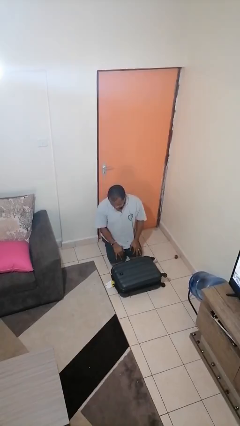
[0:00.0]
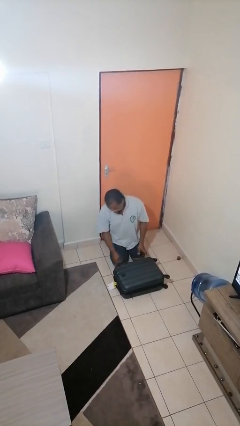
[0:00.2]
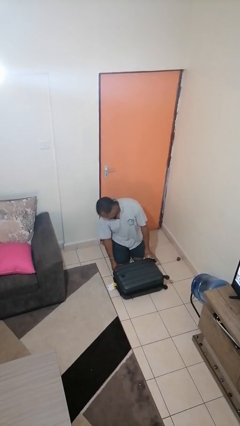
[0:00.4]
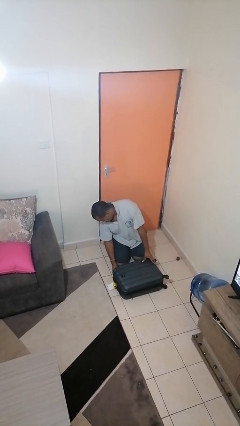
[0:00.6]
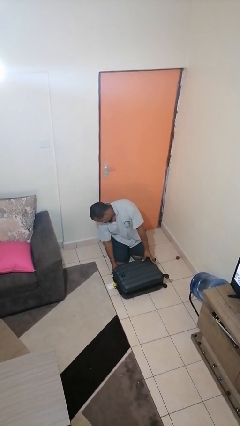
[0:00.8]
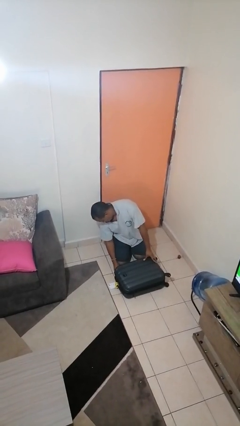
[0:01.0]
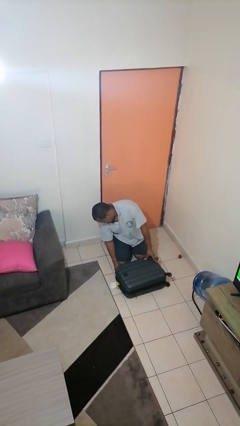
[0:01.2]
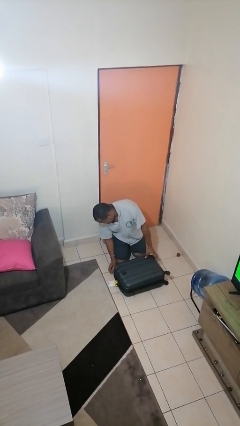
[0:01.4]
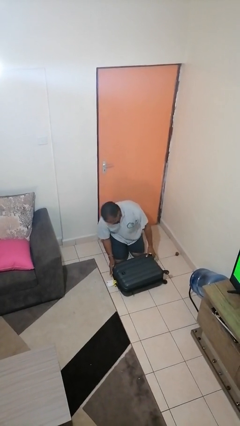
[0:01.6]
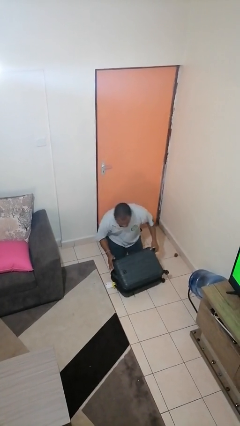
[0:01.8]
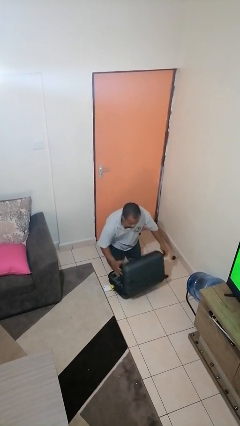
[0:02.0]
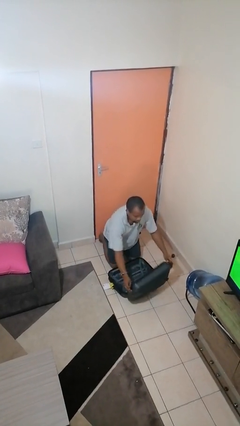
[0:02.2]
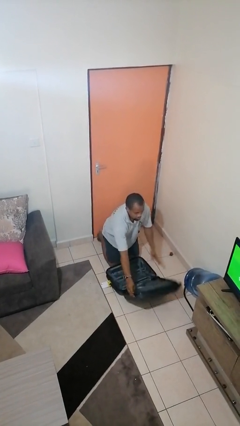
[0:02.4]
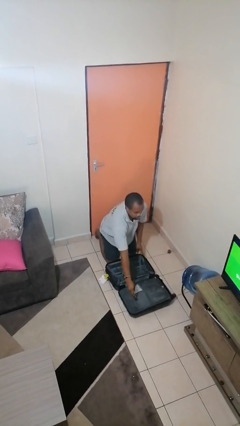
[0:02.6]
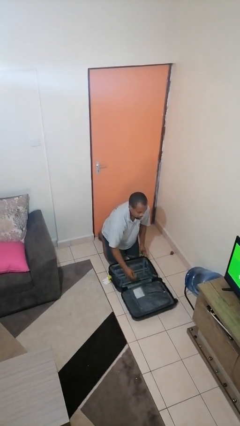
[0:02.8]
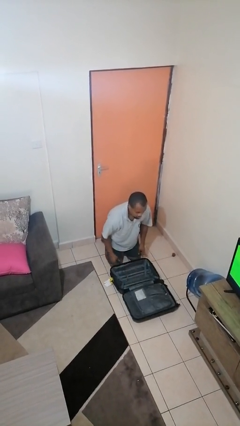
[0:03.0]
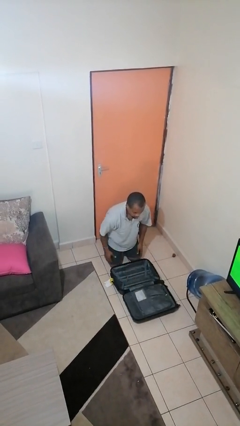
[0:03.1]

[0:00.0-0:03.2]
person opens suitcase

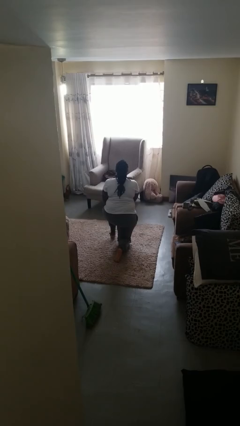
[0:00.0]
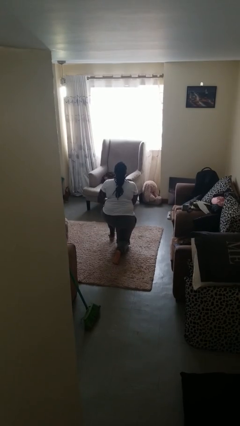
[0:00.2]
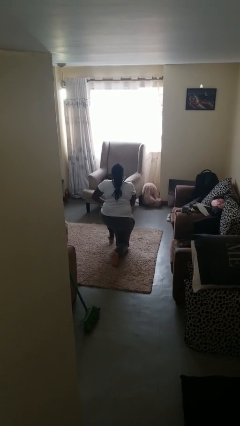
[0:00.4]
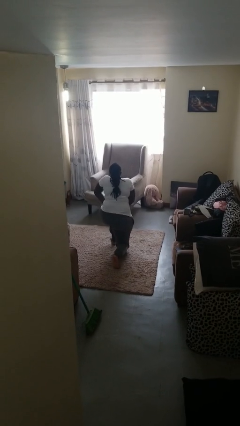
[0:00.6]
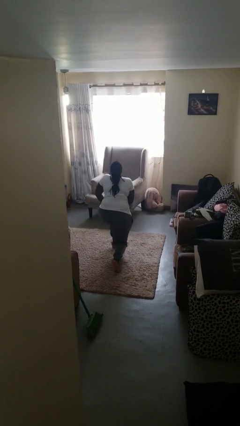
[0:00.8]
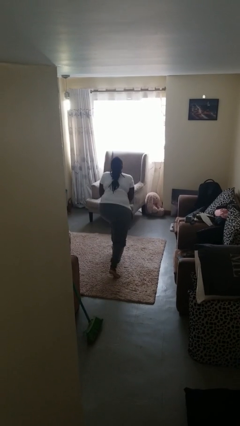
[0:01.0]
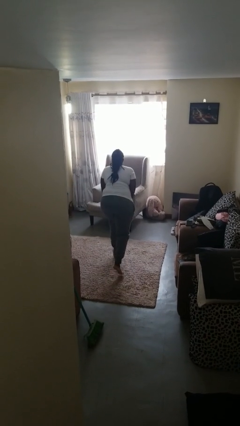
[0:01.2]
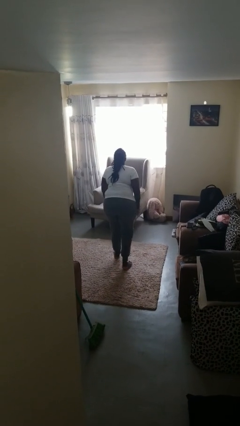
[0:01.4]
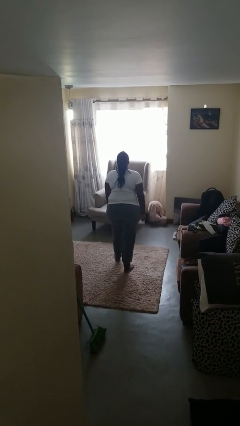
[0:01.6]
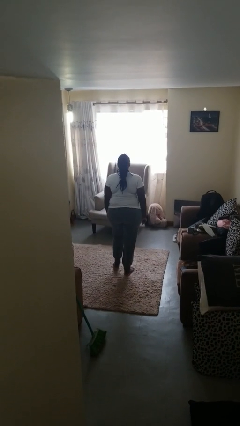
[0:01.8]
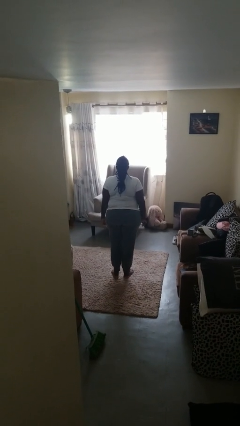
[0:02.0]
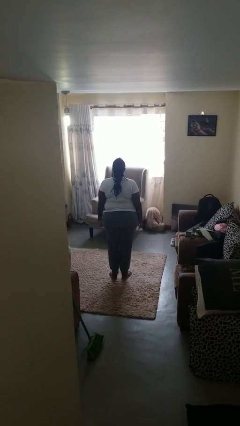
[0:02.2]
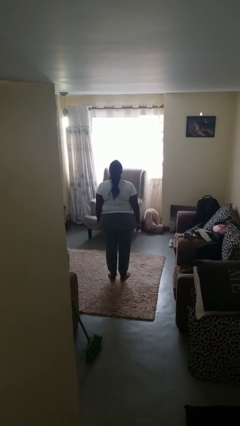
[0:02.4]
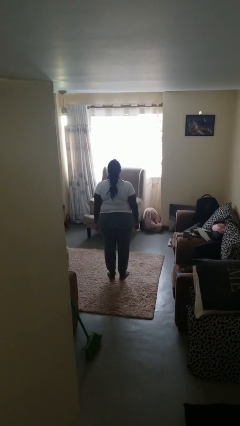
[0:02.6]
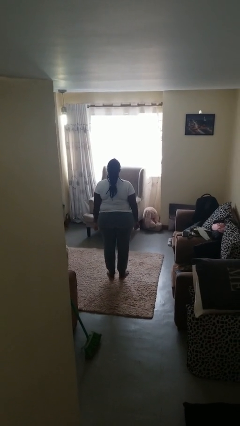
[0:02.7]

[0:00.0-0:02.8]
person stands up from floor

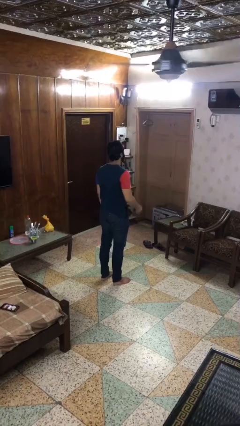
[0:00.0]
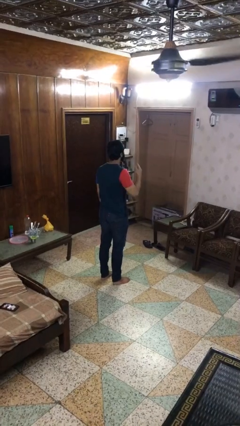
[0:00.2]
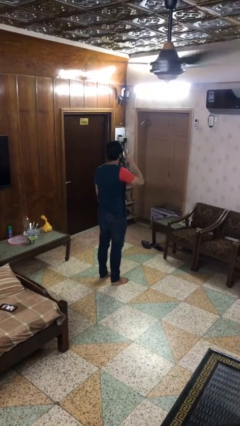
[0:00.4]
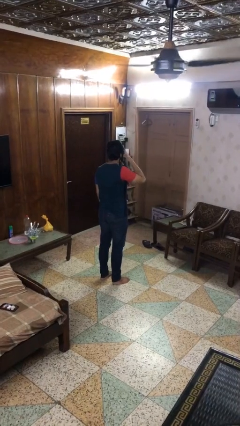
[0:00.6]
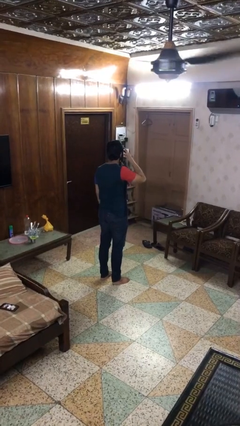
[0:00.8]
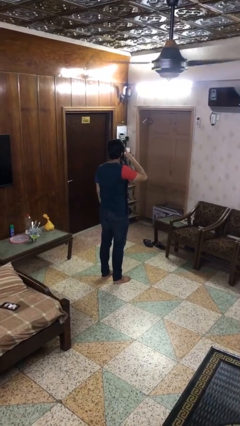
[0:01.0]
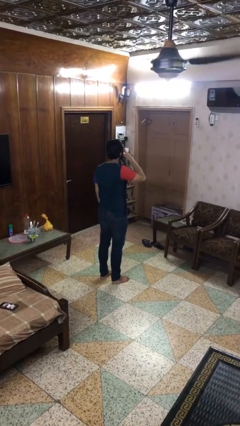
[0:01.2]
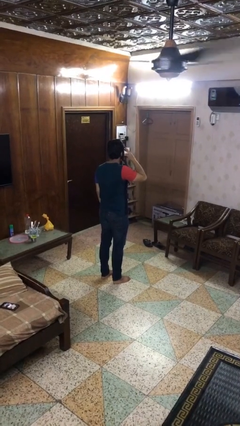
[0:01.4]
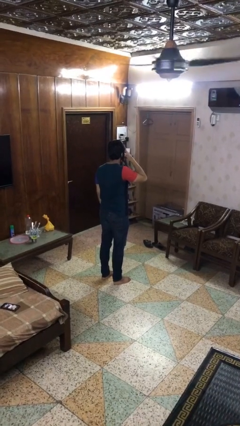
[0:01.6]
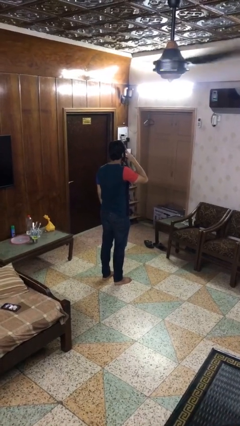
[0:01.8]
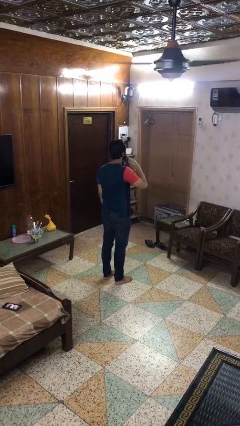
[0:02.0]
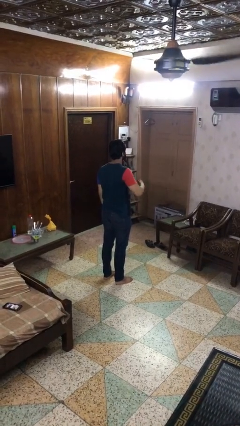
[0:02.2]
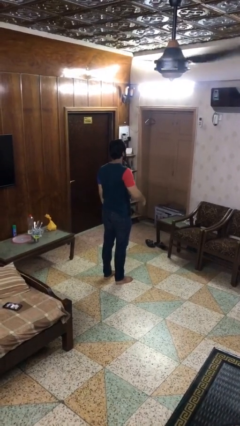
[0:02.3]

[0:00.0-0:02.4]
person rubs eyes

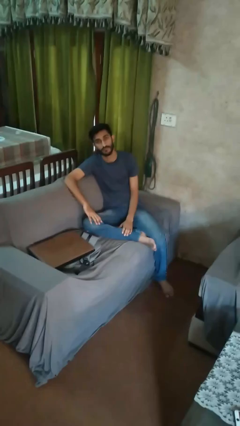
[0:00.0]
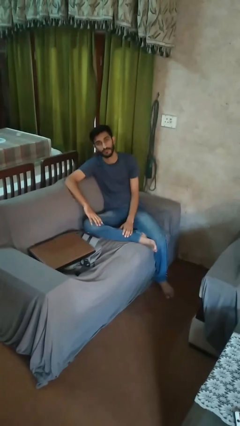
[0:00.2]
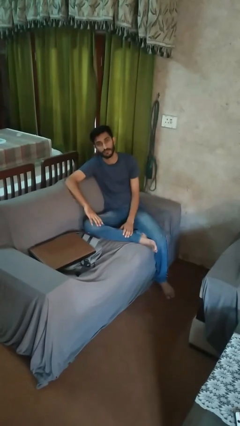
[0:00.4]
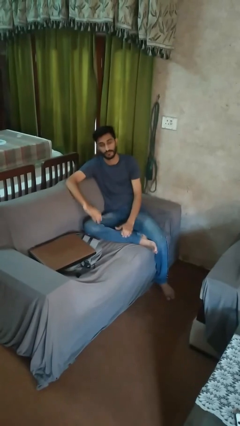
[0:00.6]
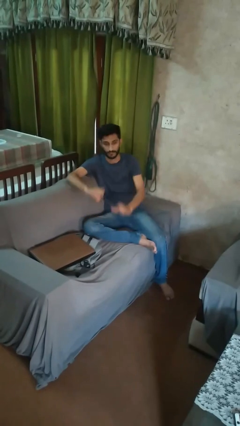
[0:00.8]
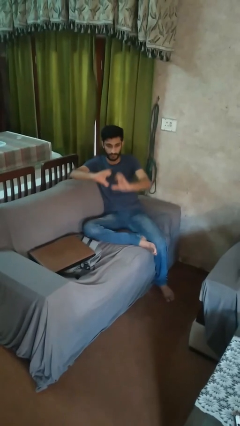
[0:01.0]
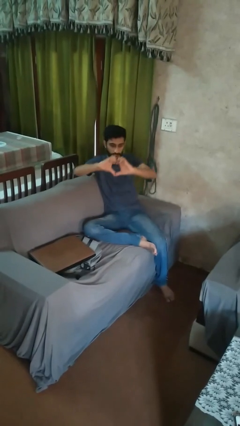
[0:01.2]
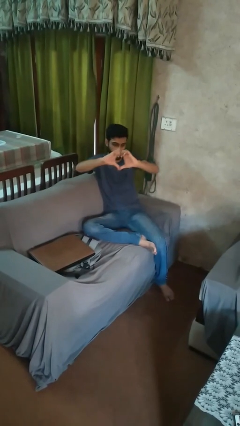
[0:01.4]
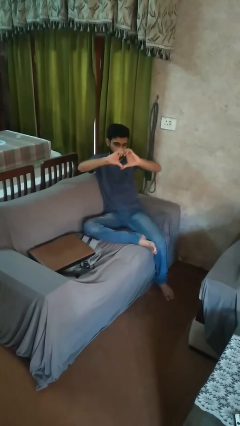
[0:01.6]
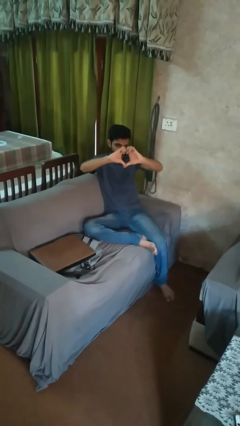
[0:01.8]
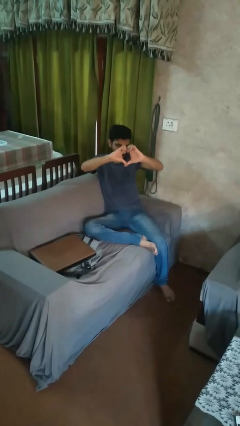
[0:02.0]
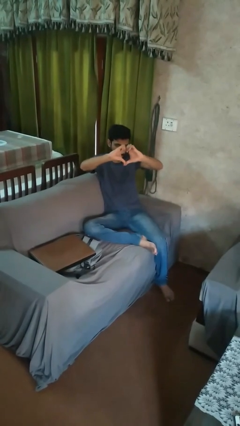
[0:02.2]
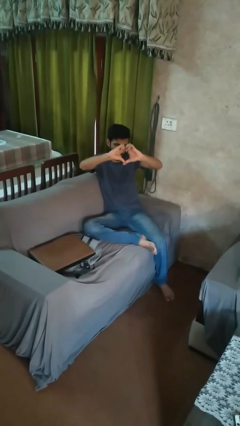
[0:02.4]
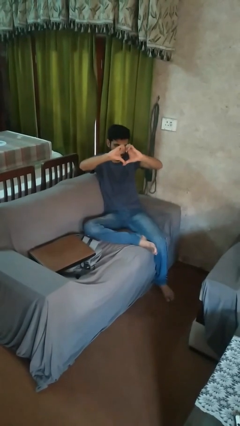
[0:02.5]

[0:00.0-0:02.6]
person gestures heart

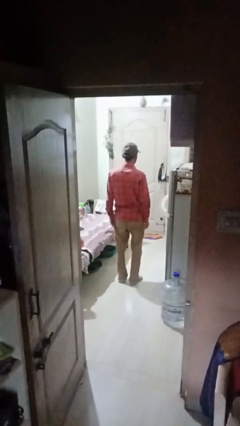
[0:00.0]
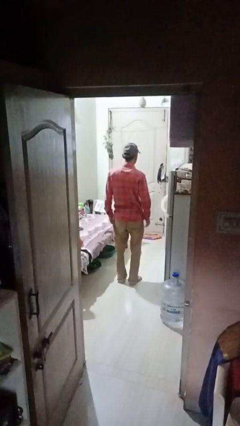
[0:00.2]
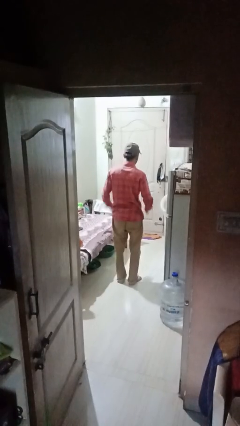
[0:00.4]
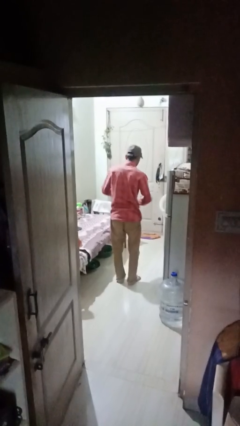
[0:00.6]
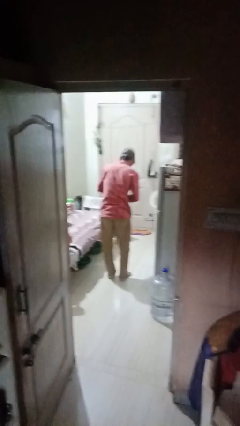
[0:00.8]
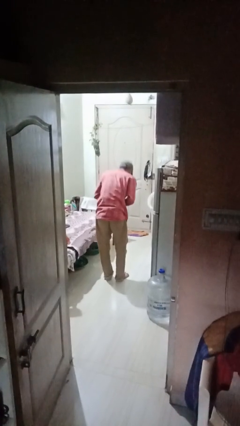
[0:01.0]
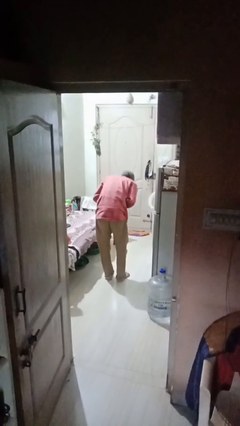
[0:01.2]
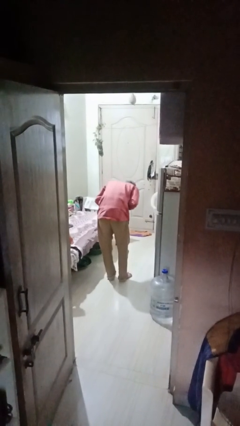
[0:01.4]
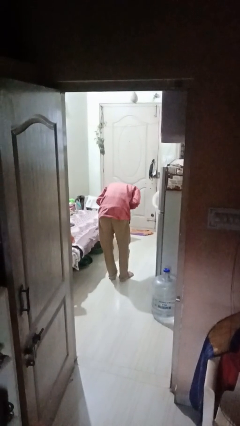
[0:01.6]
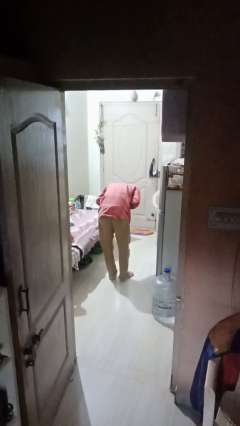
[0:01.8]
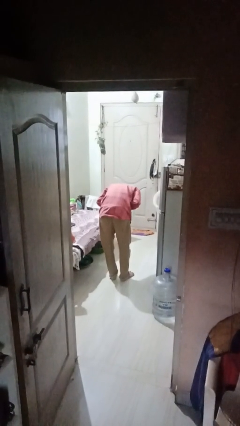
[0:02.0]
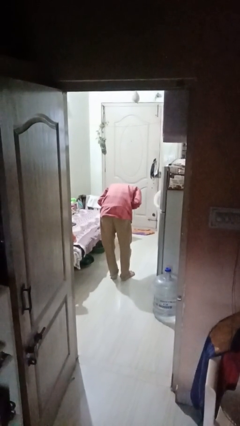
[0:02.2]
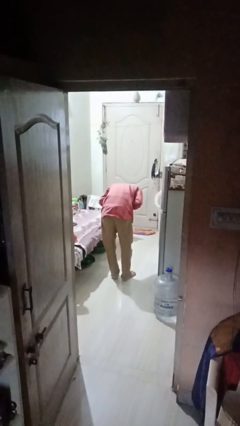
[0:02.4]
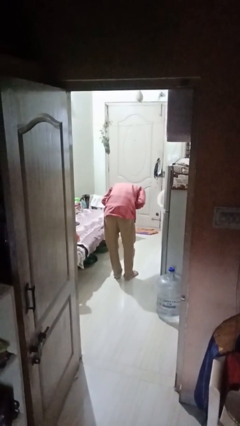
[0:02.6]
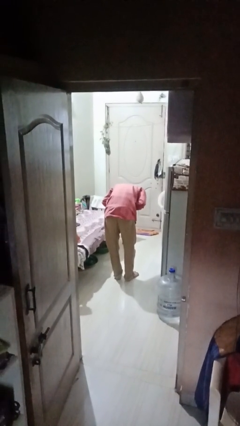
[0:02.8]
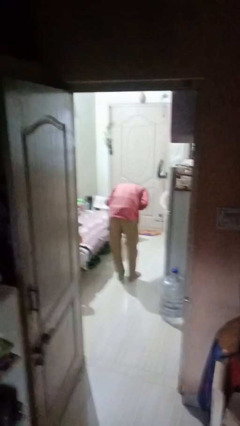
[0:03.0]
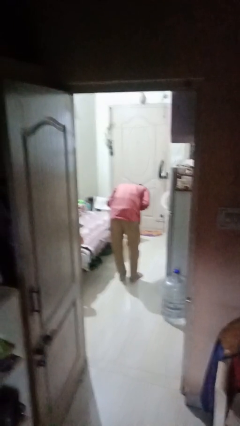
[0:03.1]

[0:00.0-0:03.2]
person bows

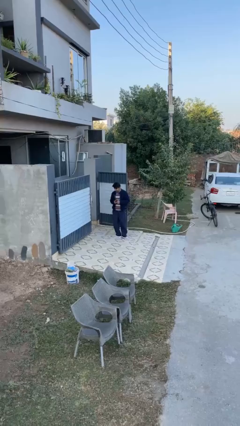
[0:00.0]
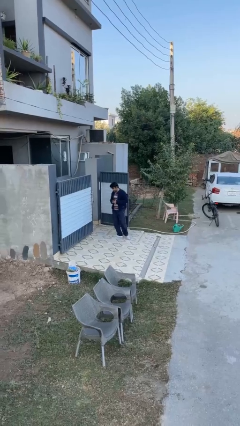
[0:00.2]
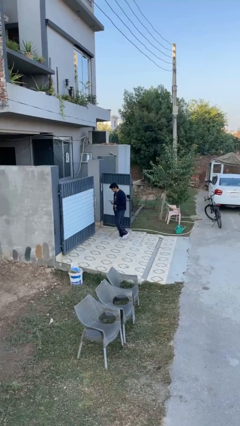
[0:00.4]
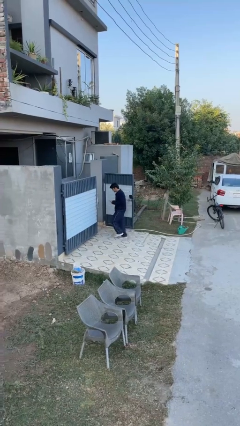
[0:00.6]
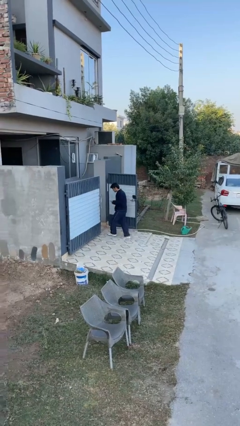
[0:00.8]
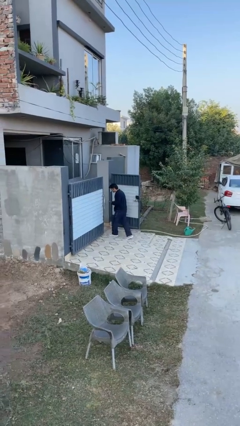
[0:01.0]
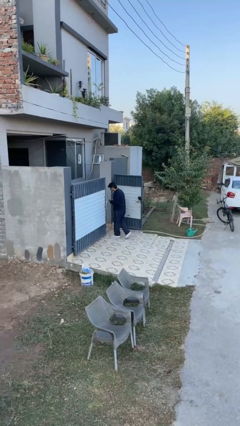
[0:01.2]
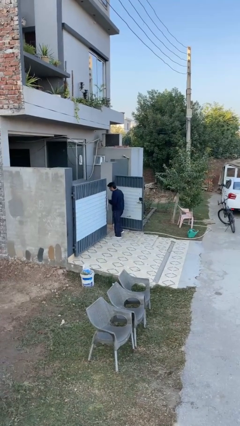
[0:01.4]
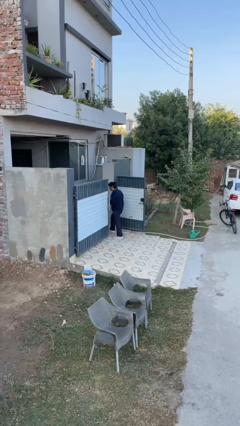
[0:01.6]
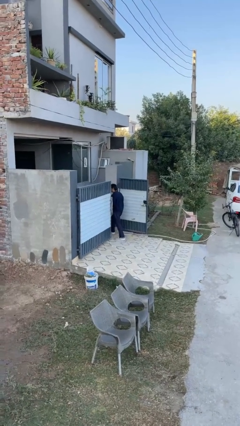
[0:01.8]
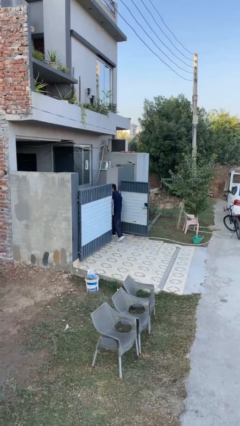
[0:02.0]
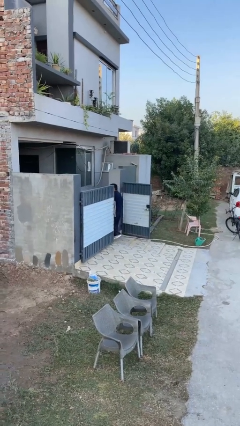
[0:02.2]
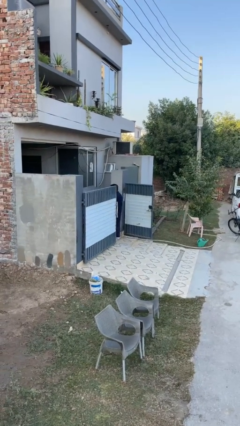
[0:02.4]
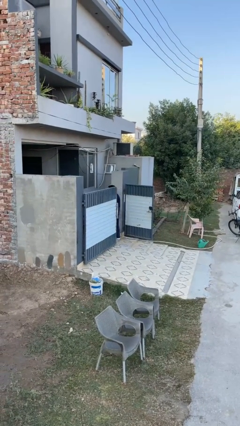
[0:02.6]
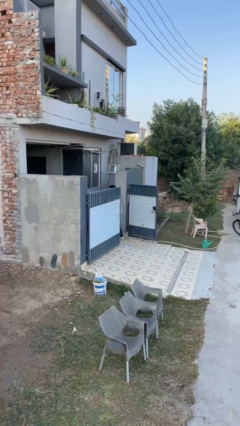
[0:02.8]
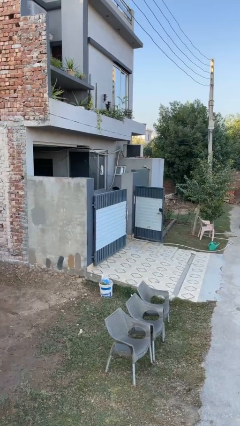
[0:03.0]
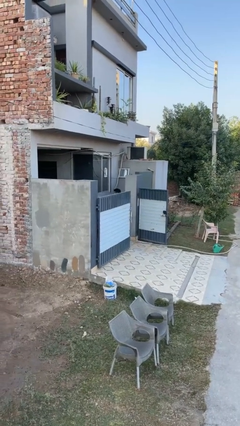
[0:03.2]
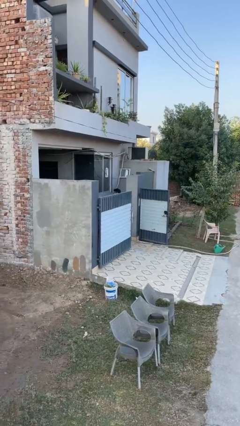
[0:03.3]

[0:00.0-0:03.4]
person exits scene through structure
